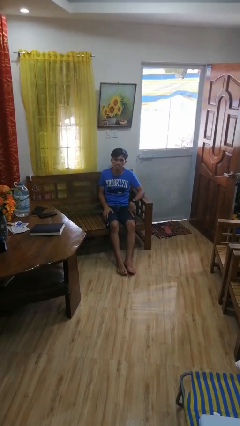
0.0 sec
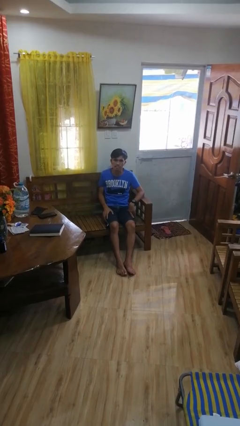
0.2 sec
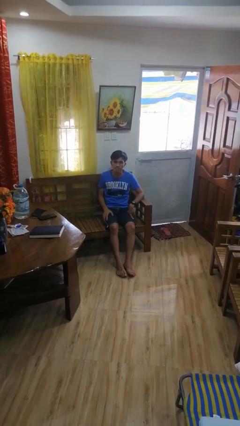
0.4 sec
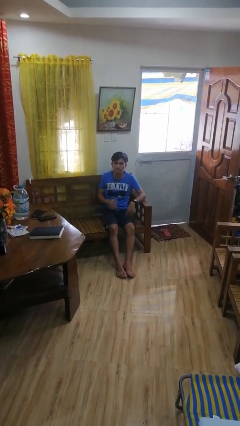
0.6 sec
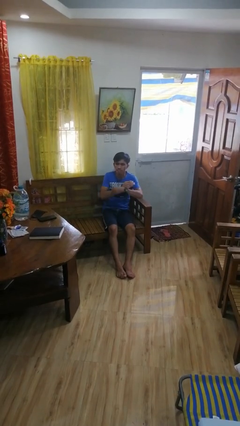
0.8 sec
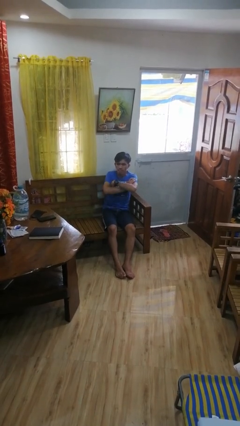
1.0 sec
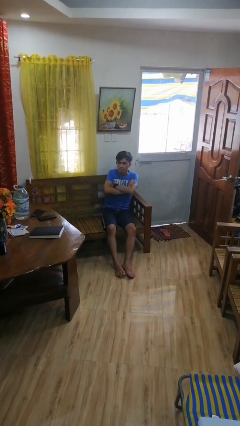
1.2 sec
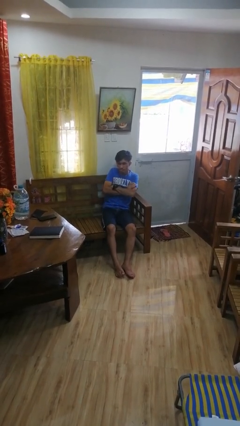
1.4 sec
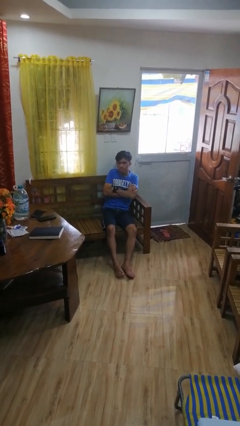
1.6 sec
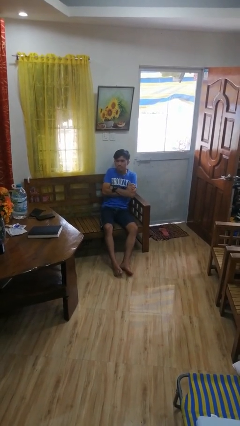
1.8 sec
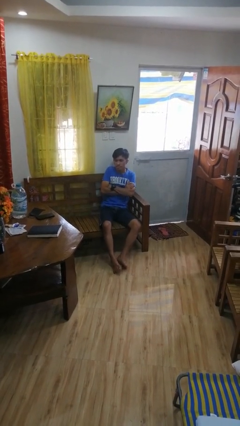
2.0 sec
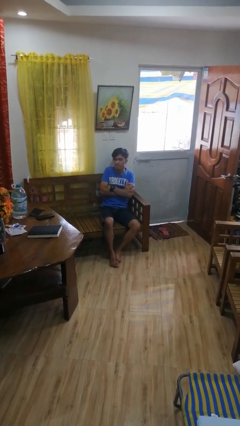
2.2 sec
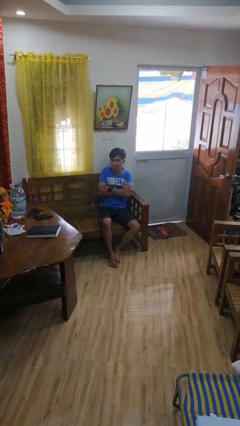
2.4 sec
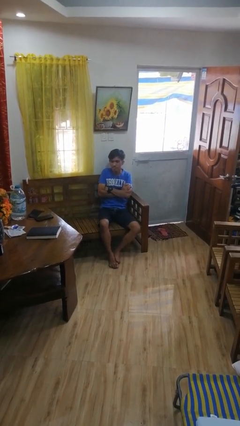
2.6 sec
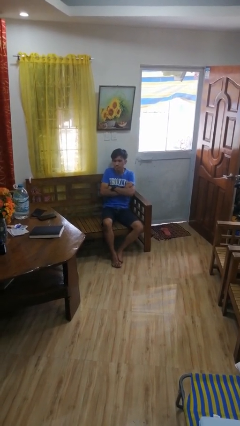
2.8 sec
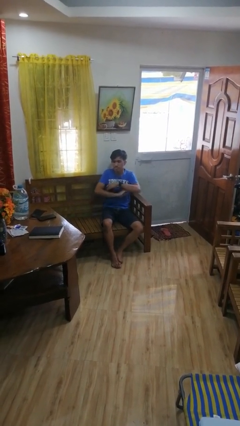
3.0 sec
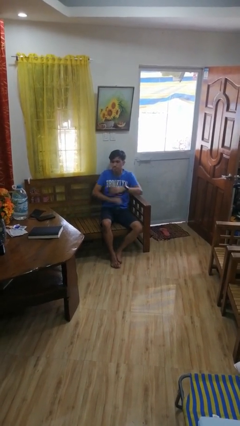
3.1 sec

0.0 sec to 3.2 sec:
person crosses arms

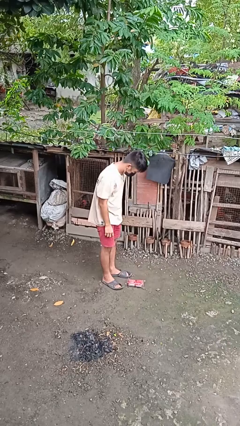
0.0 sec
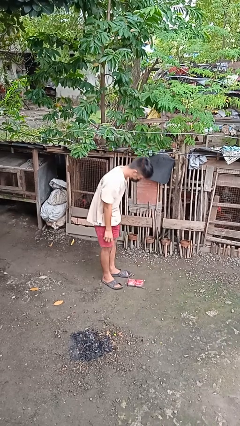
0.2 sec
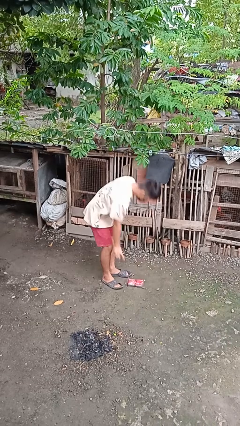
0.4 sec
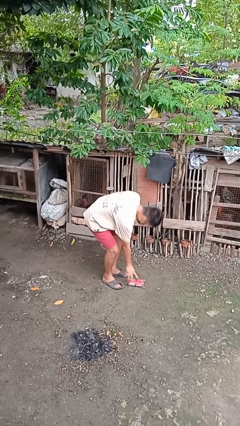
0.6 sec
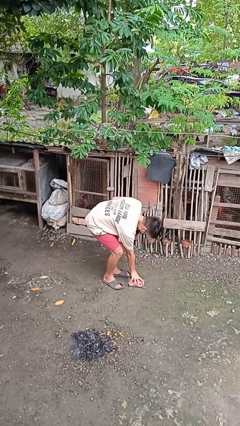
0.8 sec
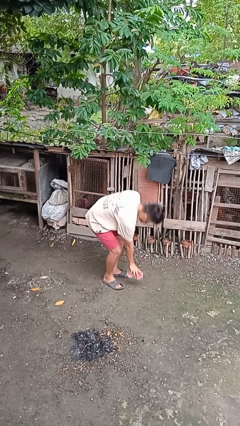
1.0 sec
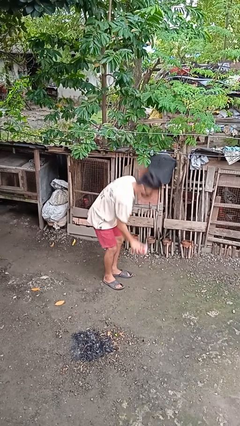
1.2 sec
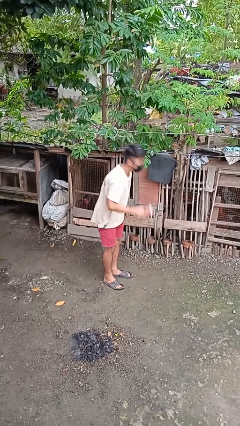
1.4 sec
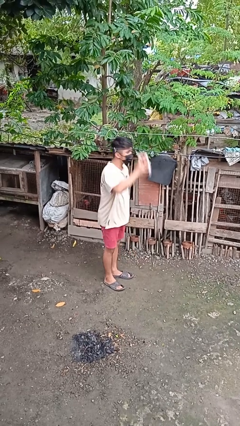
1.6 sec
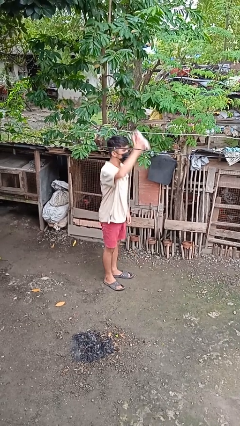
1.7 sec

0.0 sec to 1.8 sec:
person picks up object from floor

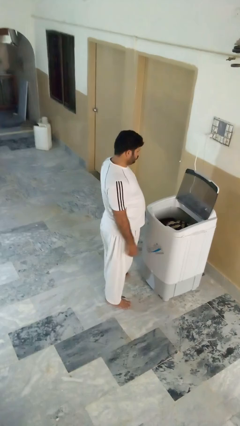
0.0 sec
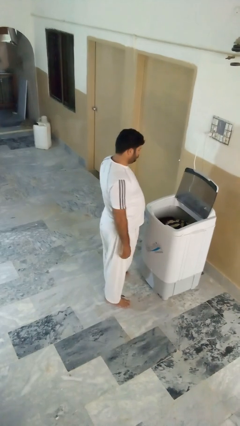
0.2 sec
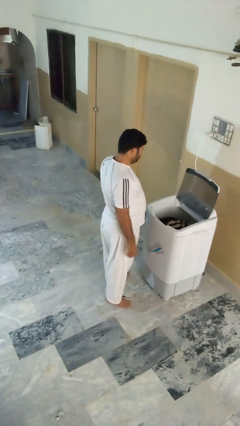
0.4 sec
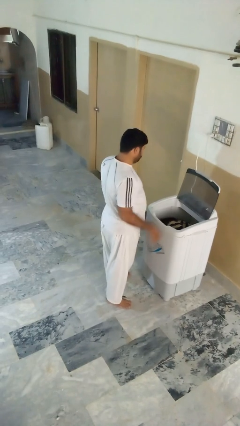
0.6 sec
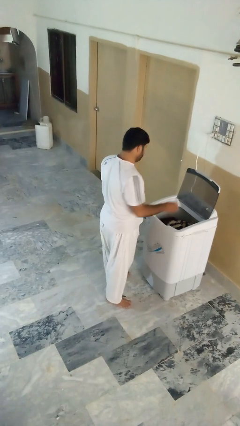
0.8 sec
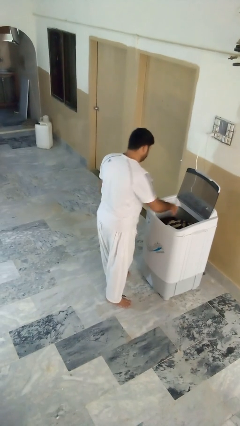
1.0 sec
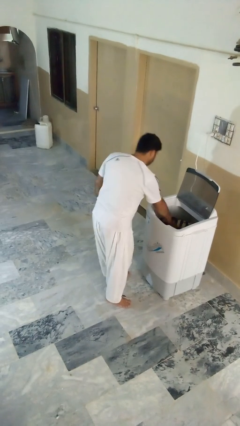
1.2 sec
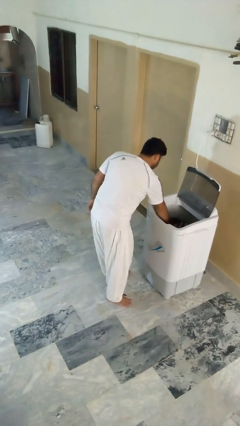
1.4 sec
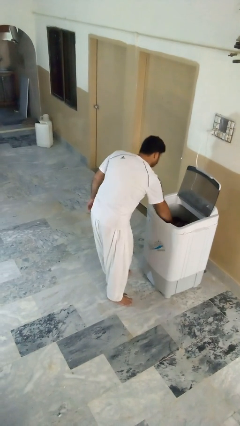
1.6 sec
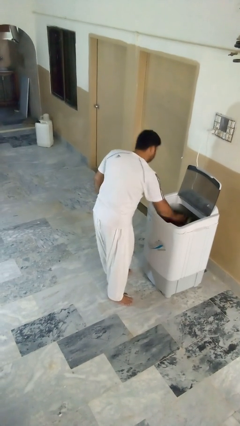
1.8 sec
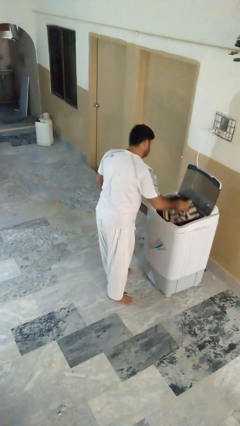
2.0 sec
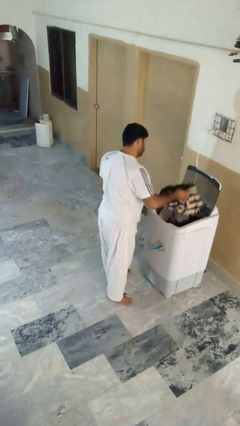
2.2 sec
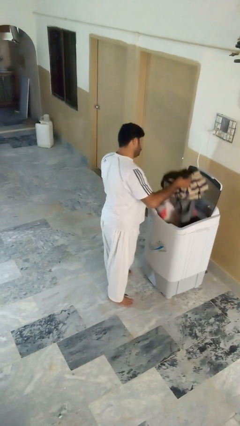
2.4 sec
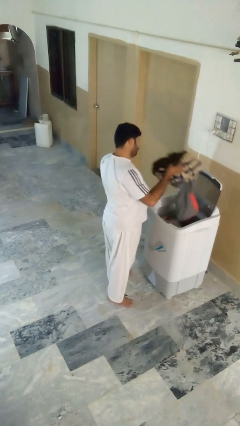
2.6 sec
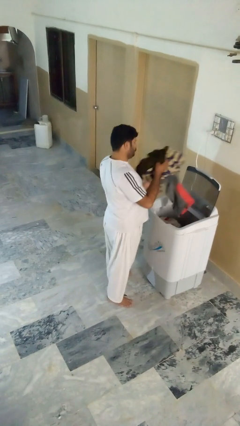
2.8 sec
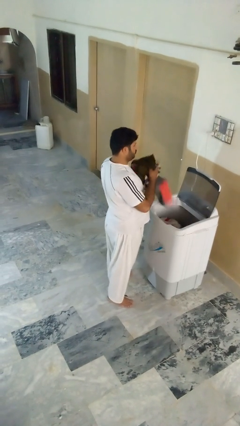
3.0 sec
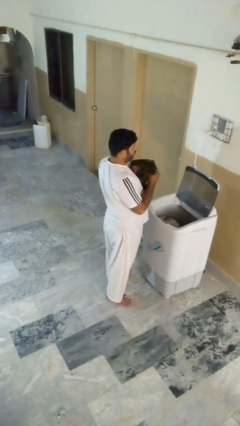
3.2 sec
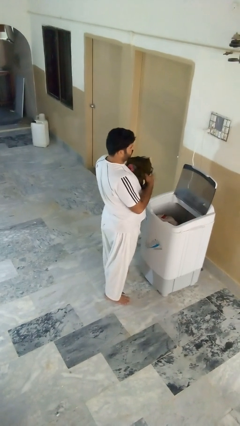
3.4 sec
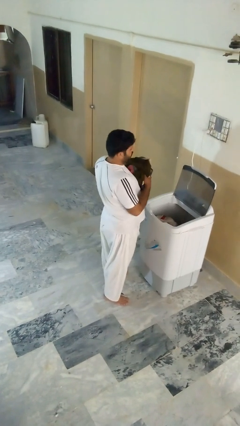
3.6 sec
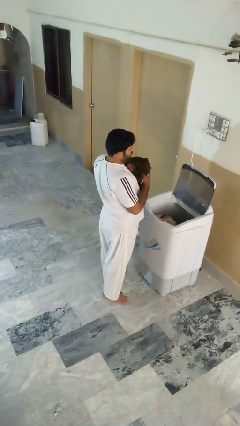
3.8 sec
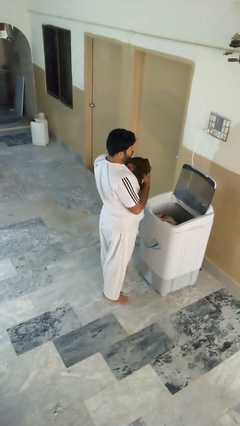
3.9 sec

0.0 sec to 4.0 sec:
person unloads clotheswasher

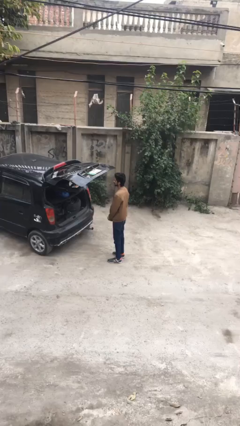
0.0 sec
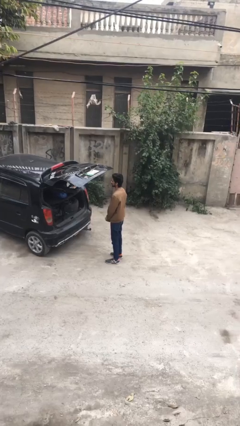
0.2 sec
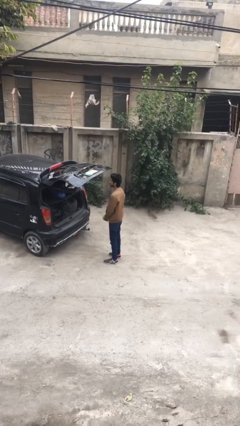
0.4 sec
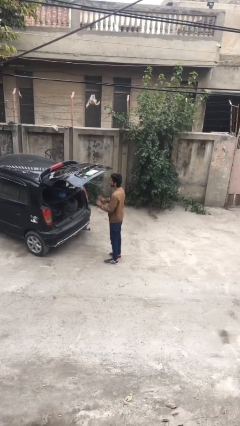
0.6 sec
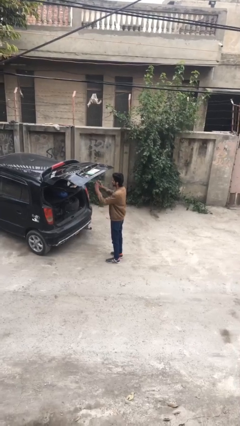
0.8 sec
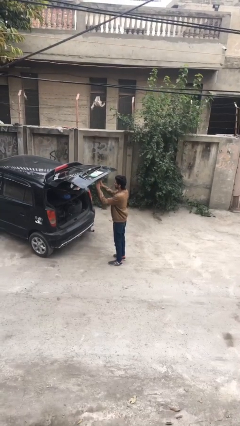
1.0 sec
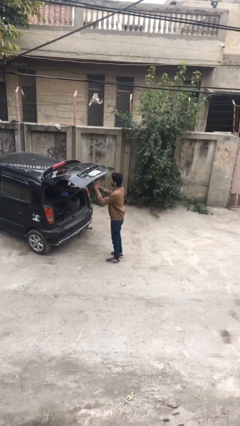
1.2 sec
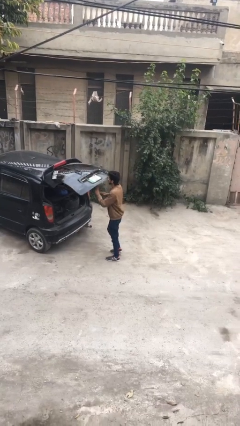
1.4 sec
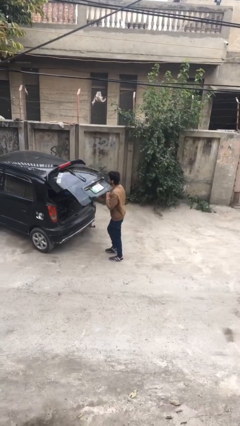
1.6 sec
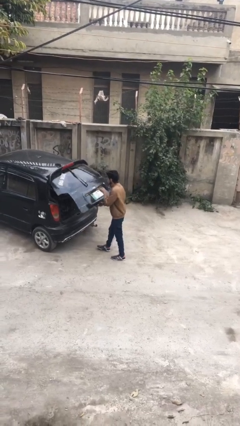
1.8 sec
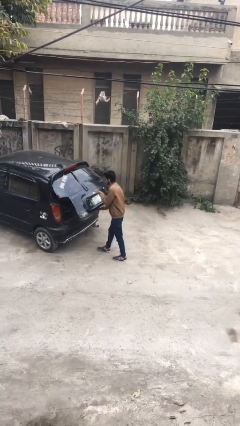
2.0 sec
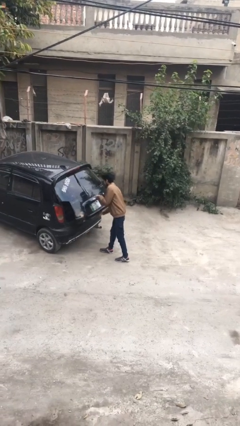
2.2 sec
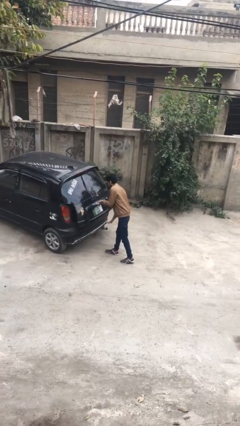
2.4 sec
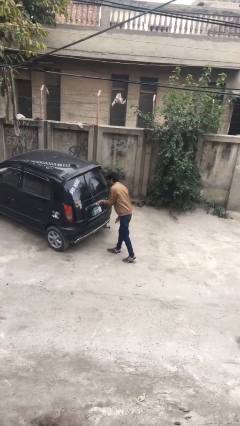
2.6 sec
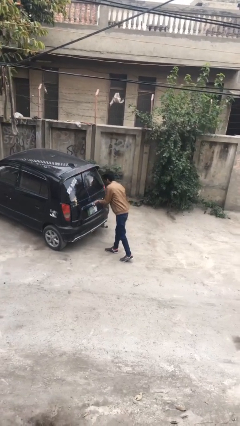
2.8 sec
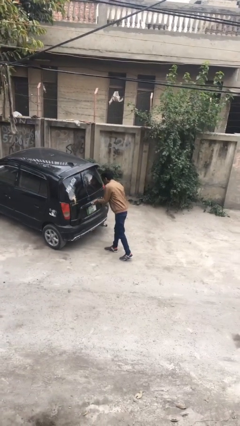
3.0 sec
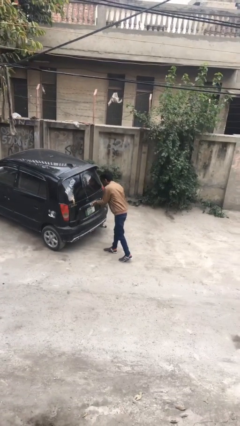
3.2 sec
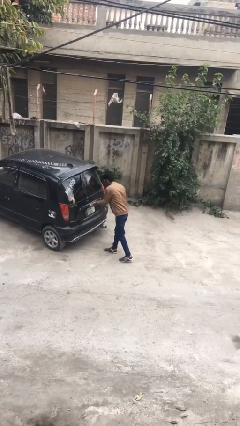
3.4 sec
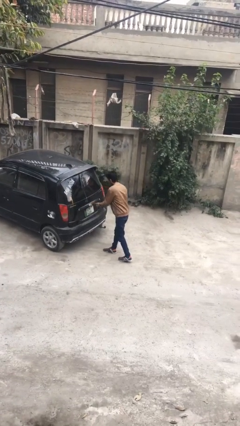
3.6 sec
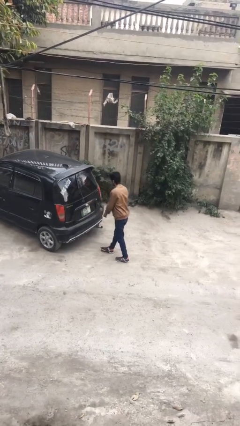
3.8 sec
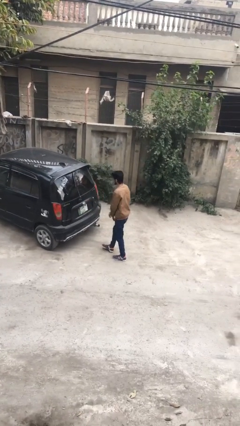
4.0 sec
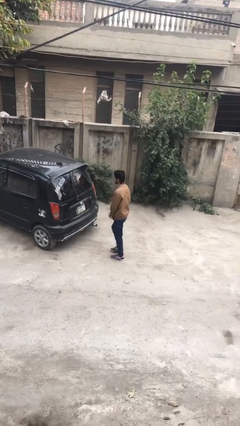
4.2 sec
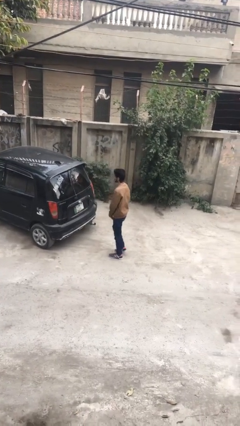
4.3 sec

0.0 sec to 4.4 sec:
person closes car trunk

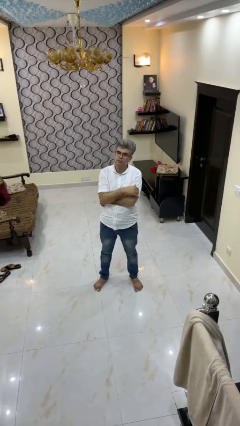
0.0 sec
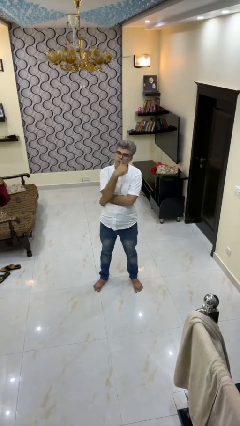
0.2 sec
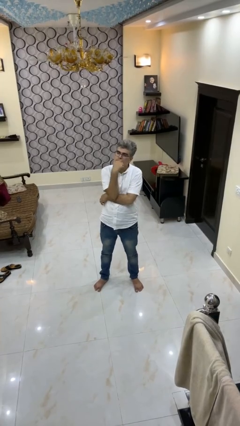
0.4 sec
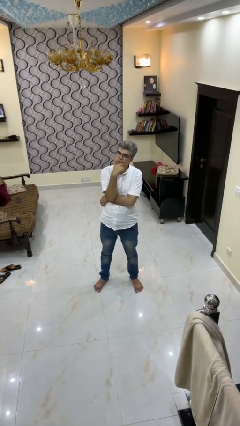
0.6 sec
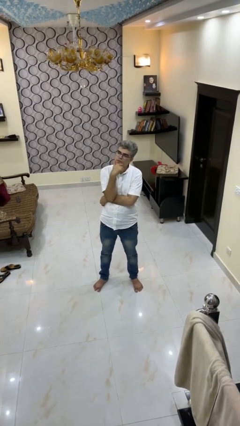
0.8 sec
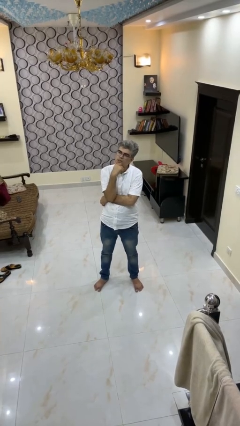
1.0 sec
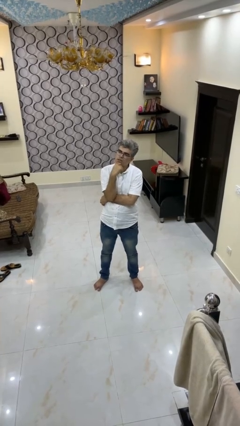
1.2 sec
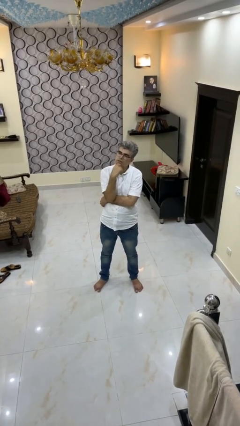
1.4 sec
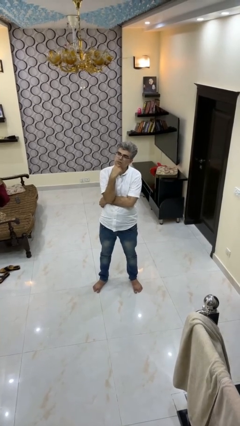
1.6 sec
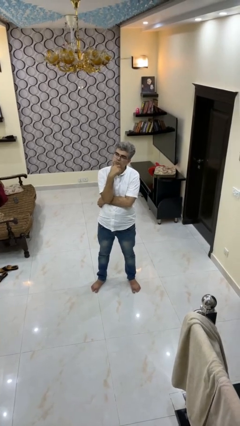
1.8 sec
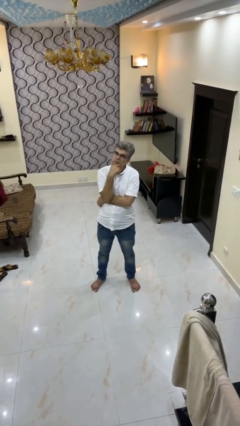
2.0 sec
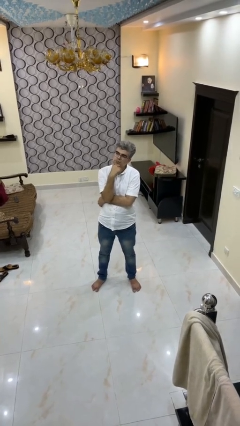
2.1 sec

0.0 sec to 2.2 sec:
person strokes chin

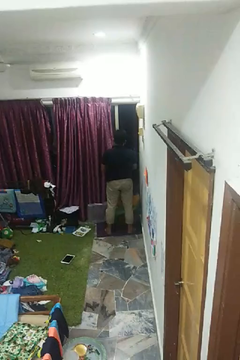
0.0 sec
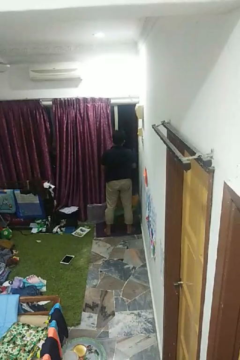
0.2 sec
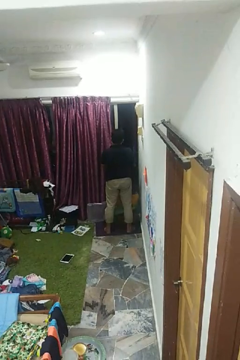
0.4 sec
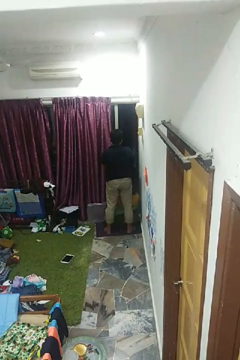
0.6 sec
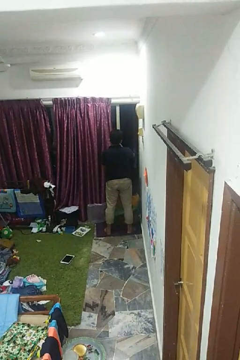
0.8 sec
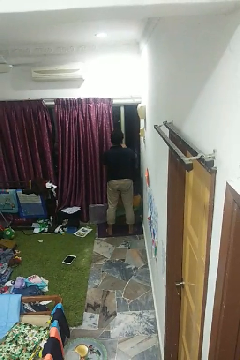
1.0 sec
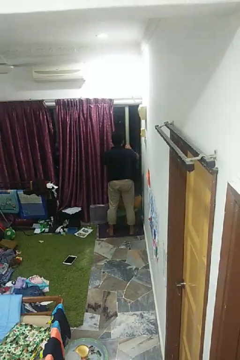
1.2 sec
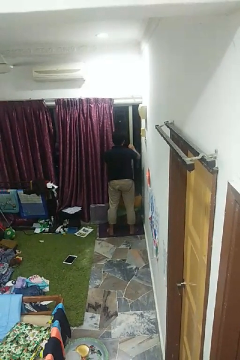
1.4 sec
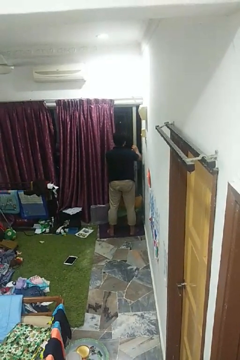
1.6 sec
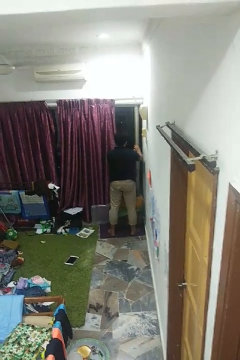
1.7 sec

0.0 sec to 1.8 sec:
person closes home window

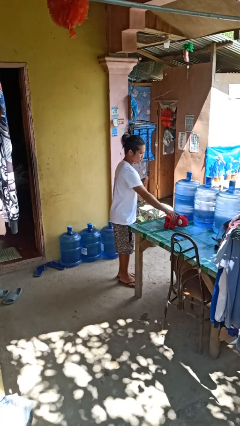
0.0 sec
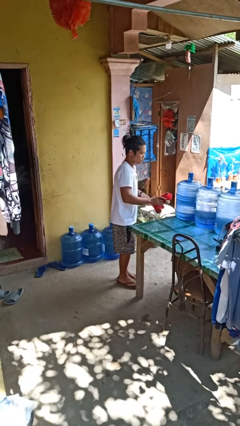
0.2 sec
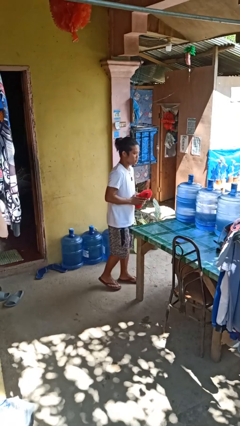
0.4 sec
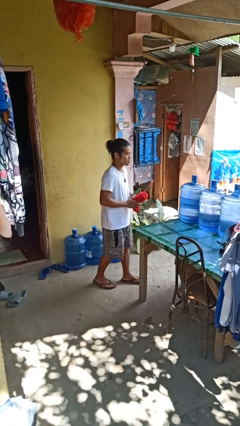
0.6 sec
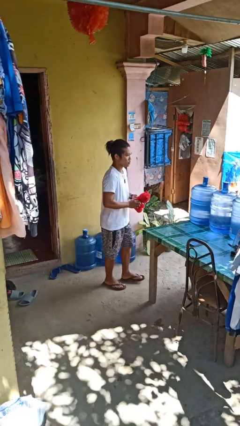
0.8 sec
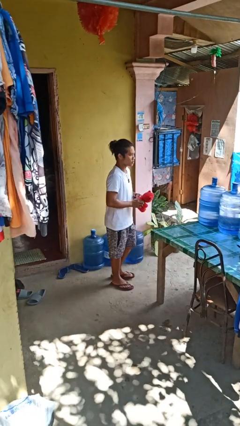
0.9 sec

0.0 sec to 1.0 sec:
person picks up object from table
